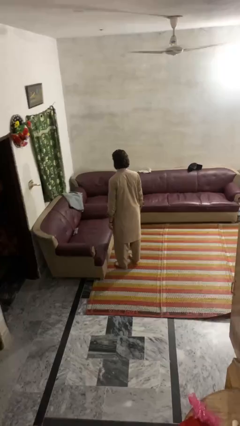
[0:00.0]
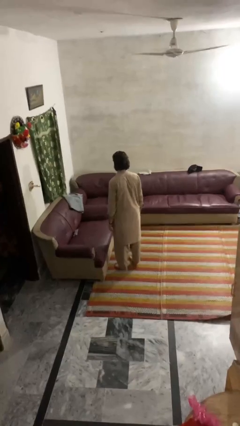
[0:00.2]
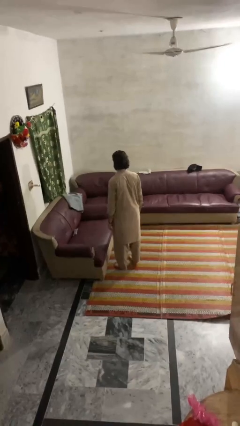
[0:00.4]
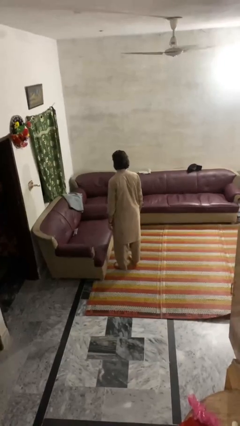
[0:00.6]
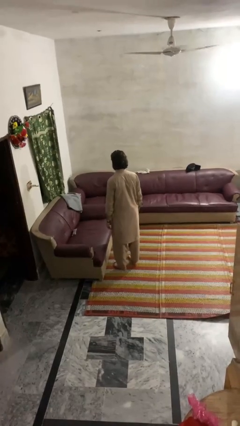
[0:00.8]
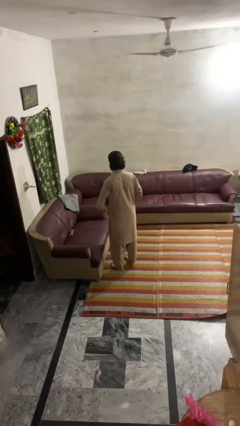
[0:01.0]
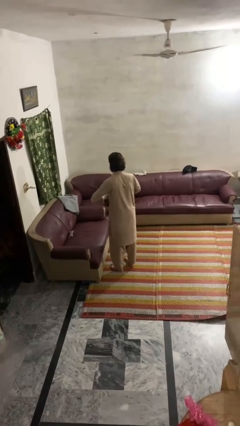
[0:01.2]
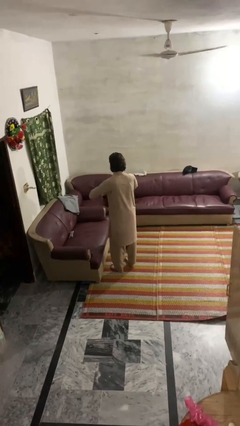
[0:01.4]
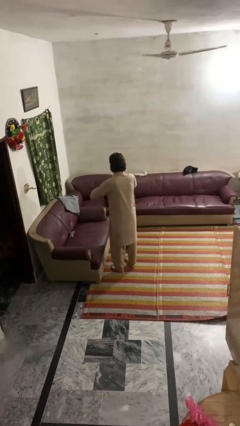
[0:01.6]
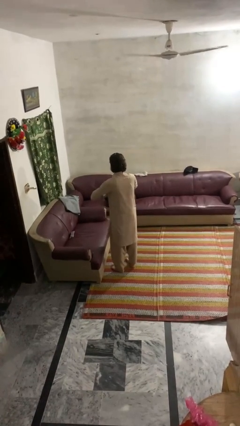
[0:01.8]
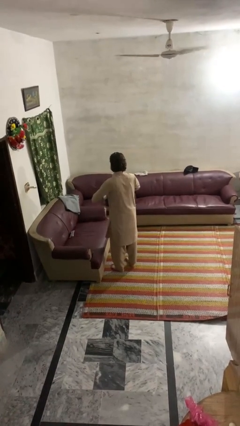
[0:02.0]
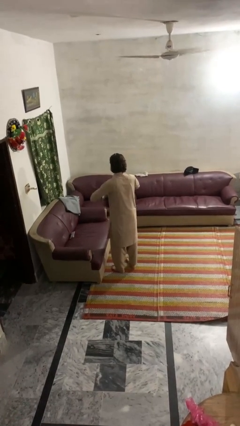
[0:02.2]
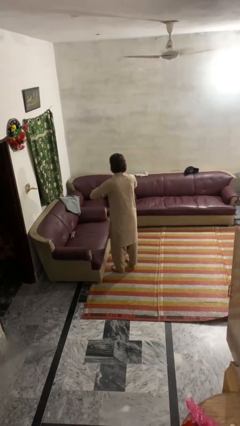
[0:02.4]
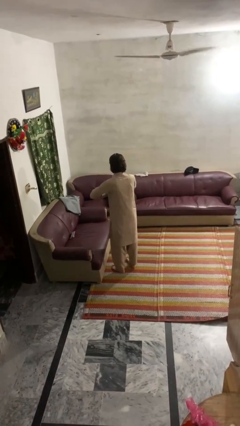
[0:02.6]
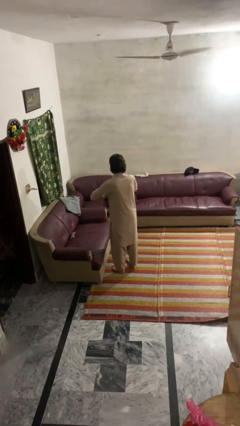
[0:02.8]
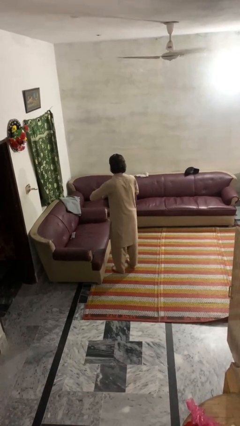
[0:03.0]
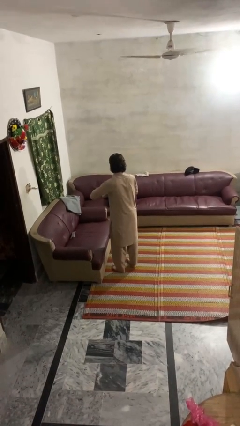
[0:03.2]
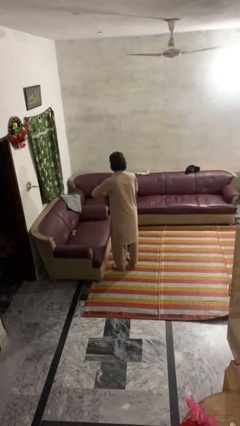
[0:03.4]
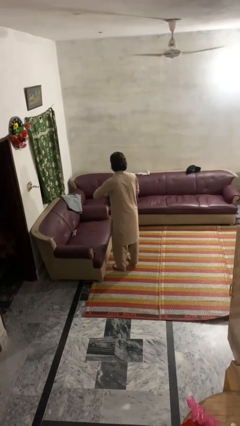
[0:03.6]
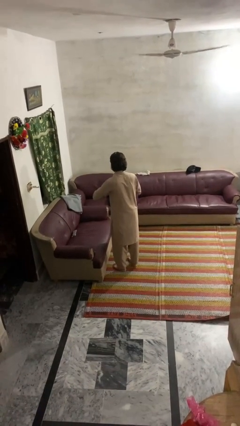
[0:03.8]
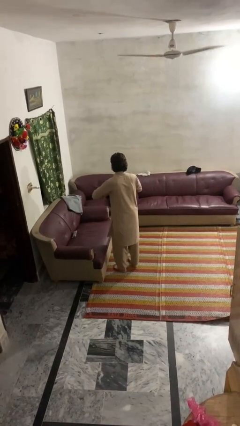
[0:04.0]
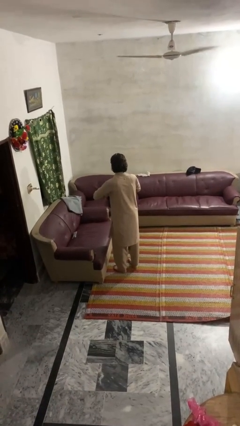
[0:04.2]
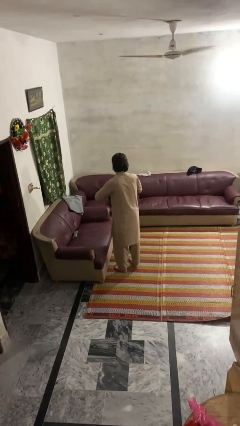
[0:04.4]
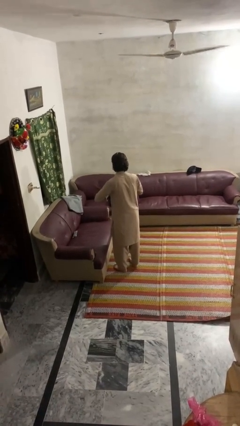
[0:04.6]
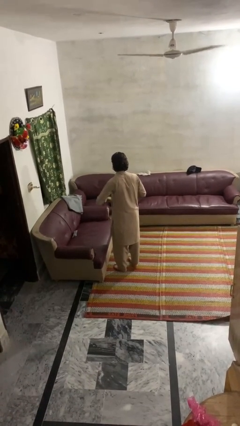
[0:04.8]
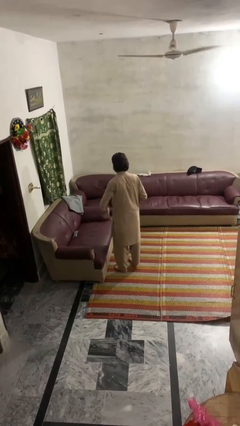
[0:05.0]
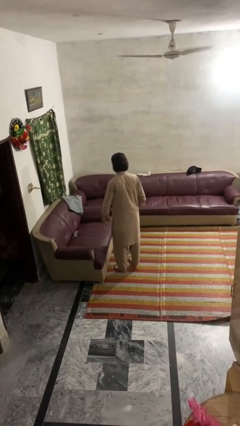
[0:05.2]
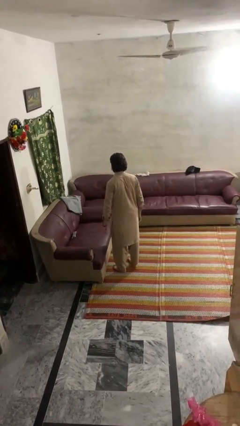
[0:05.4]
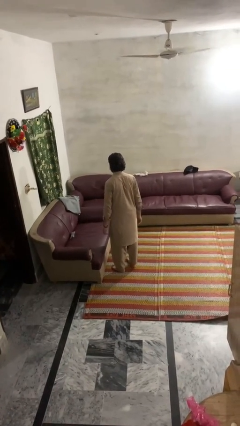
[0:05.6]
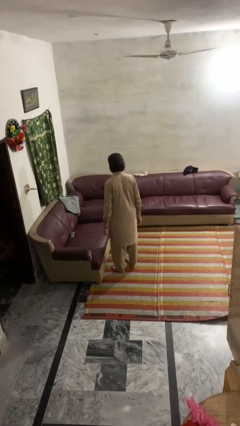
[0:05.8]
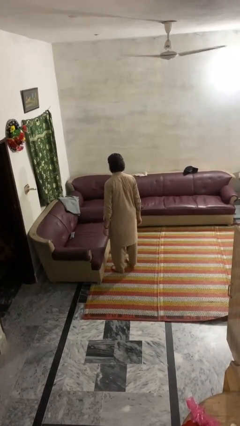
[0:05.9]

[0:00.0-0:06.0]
person cracks knuckles

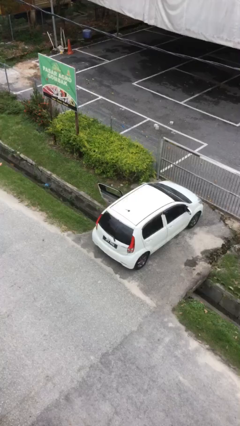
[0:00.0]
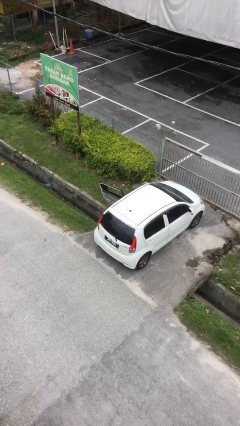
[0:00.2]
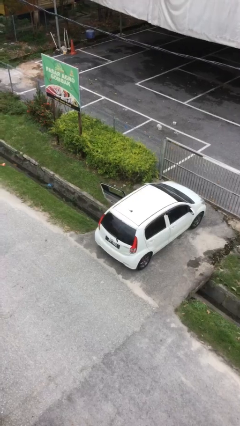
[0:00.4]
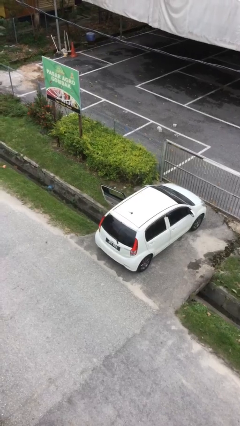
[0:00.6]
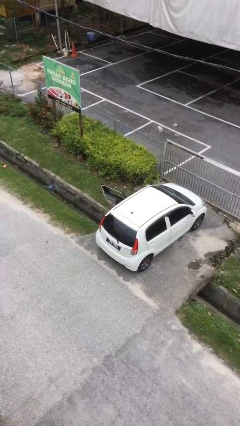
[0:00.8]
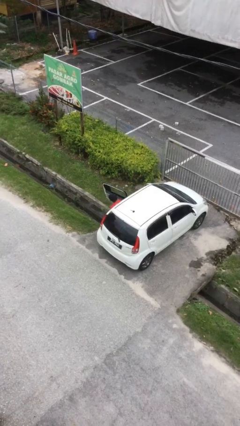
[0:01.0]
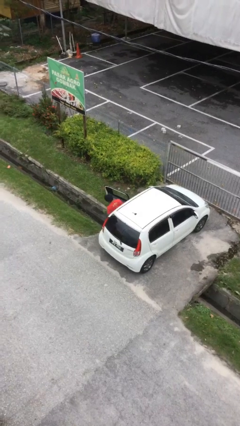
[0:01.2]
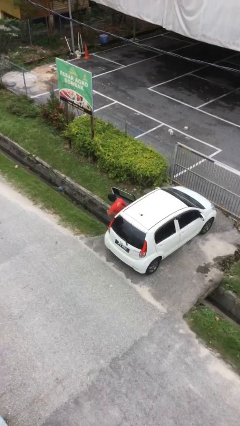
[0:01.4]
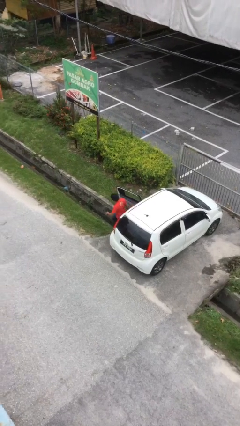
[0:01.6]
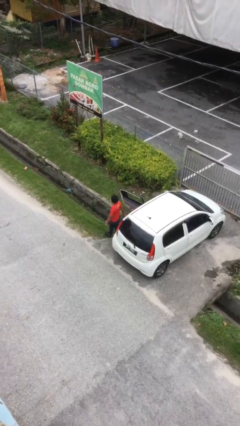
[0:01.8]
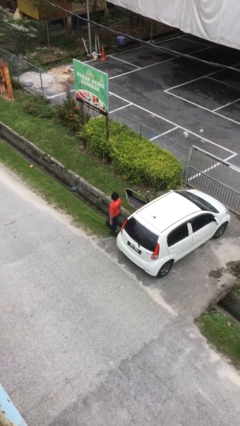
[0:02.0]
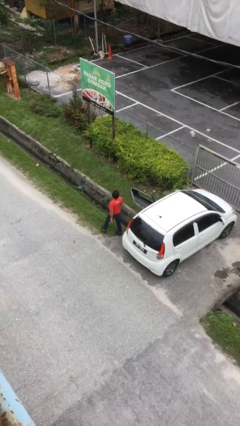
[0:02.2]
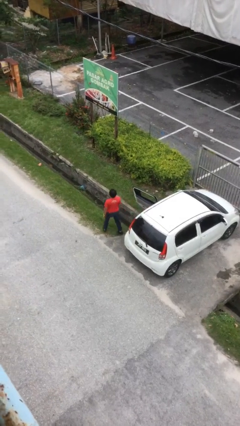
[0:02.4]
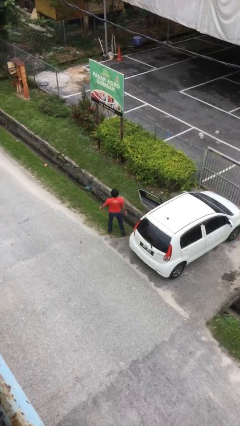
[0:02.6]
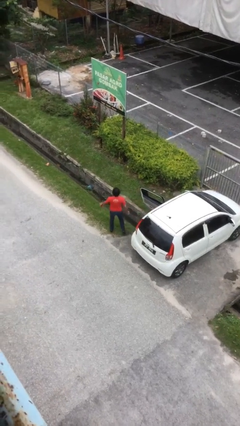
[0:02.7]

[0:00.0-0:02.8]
person exits car

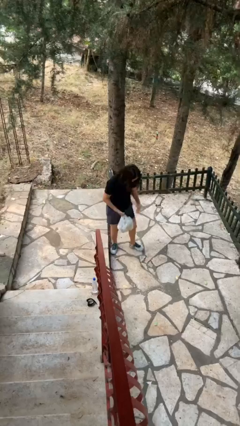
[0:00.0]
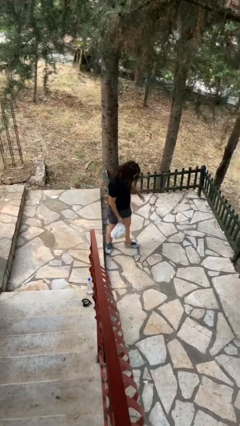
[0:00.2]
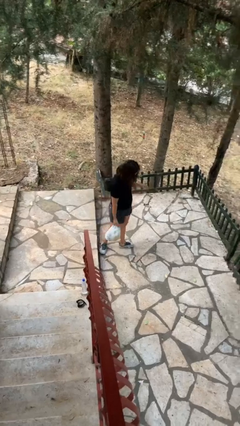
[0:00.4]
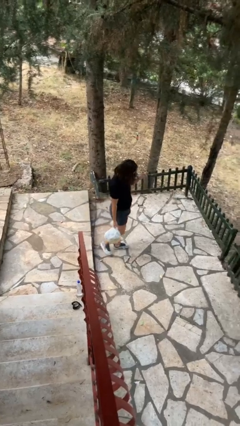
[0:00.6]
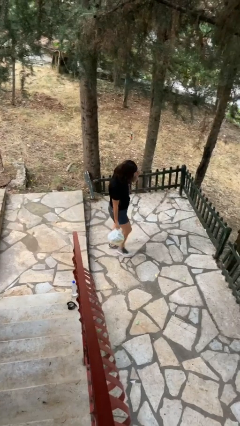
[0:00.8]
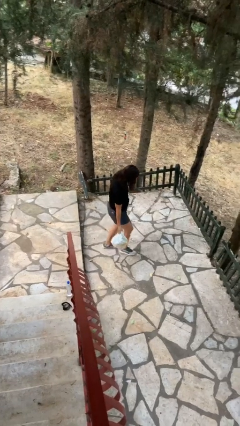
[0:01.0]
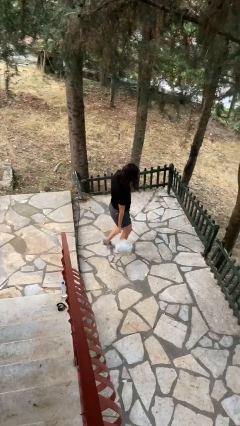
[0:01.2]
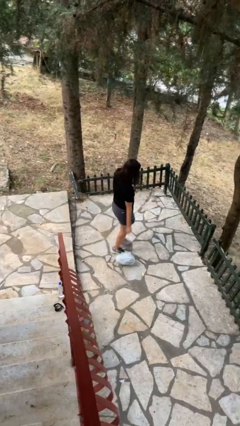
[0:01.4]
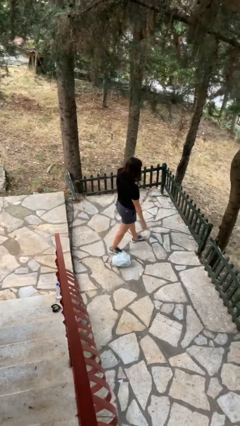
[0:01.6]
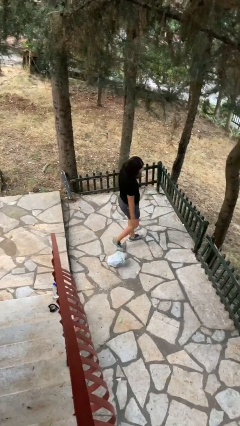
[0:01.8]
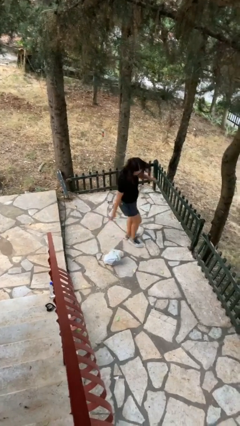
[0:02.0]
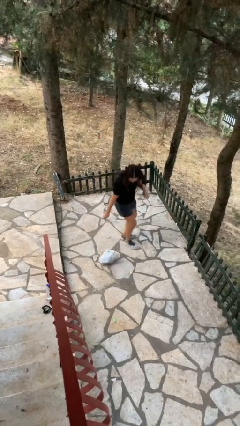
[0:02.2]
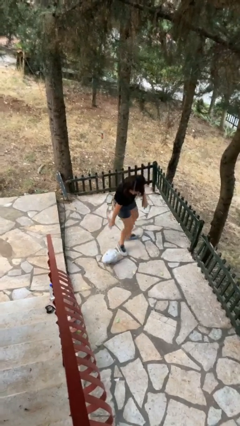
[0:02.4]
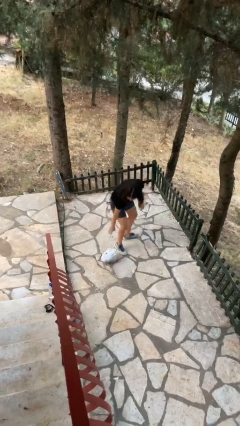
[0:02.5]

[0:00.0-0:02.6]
person drops object

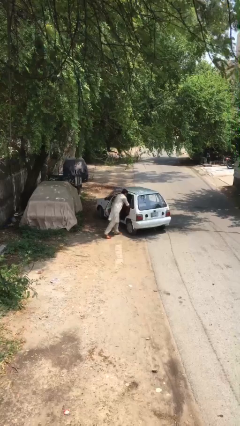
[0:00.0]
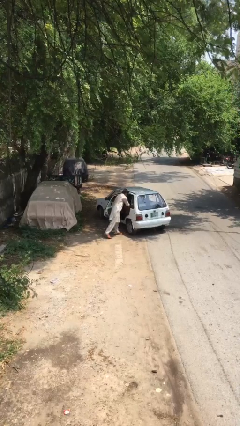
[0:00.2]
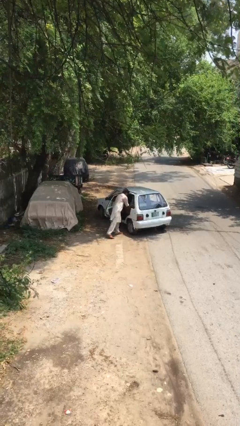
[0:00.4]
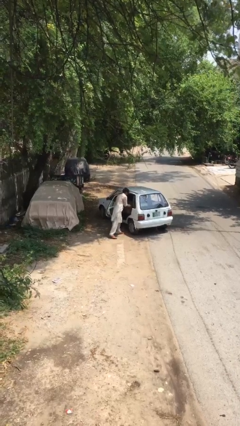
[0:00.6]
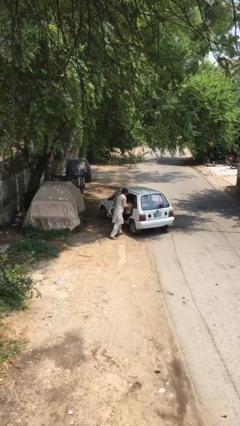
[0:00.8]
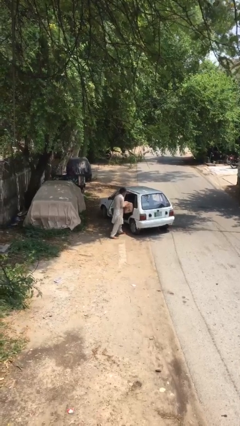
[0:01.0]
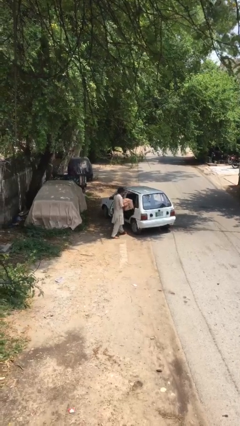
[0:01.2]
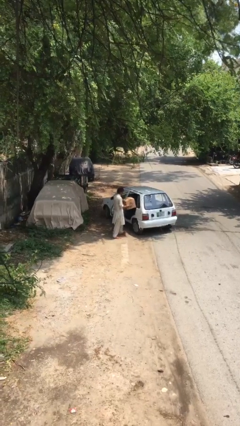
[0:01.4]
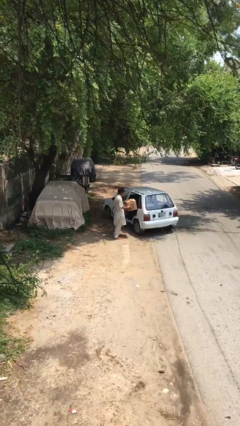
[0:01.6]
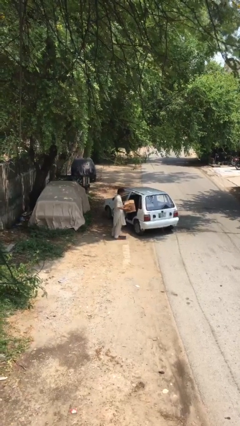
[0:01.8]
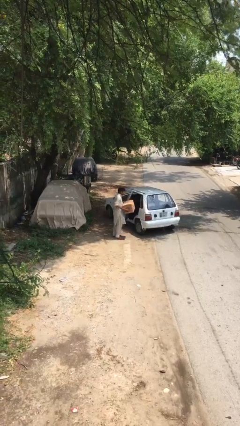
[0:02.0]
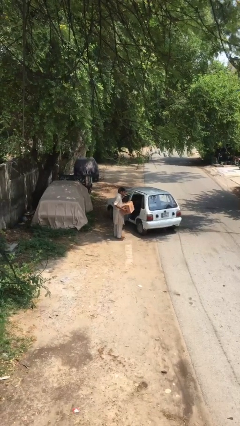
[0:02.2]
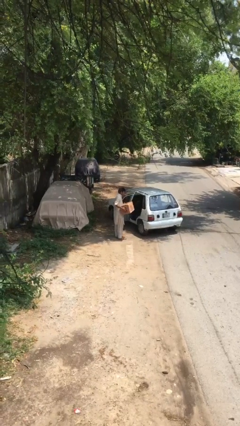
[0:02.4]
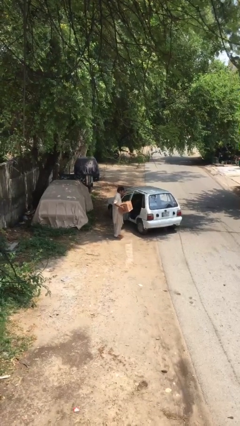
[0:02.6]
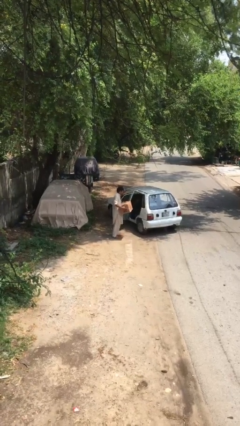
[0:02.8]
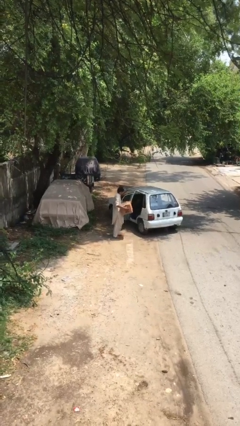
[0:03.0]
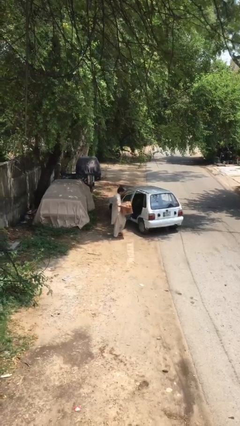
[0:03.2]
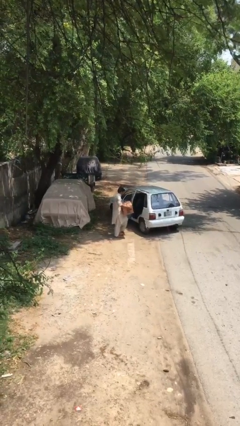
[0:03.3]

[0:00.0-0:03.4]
person unloads car

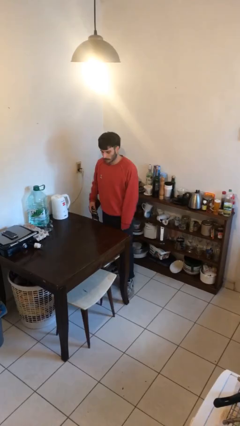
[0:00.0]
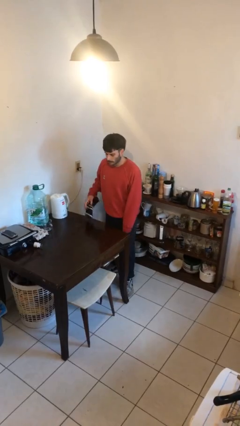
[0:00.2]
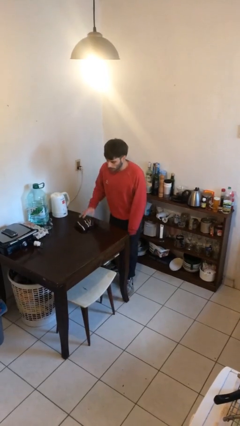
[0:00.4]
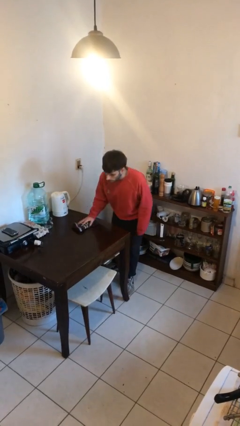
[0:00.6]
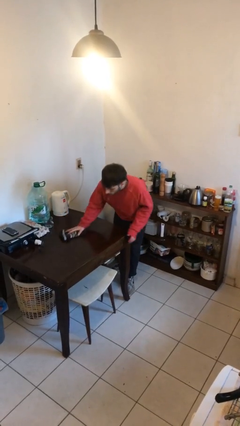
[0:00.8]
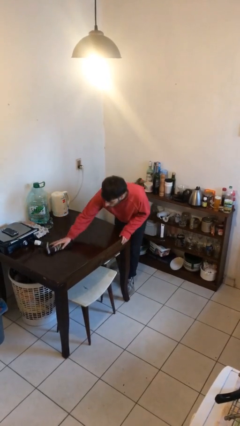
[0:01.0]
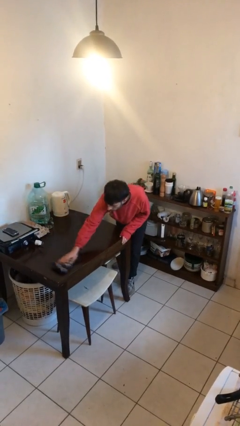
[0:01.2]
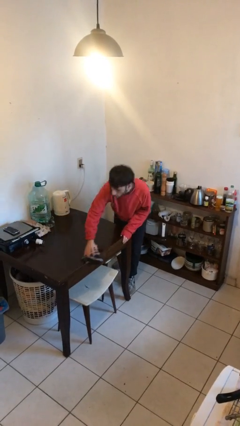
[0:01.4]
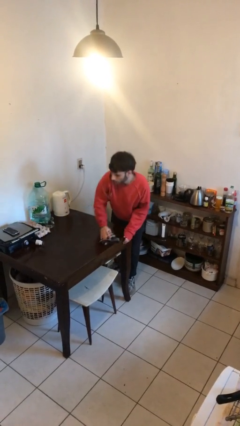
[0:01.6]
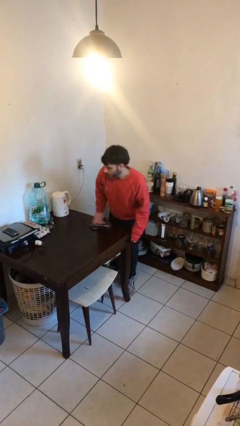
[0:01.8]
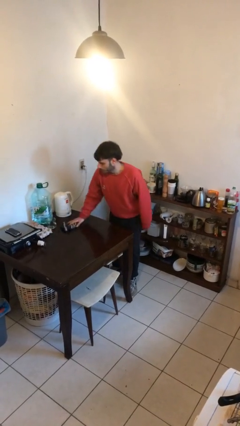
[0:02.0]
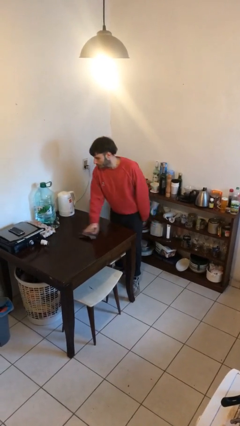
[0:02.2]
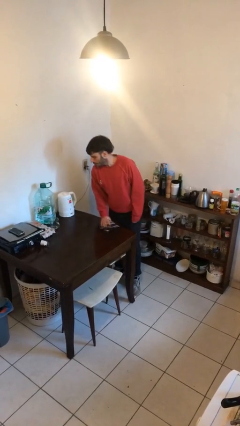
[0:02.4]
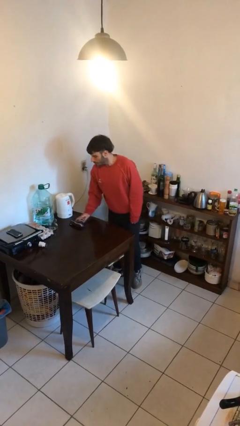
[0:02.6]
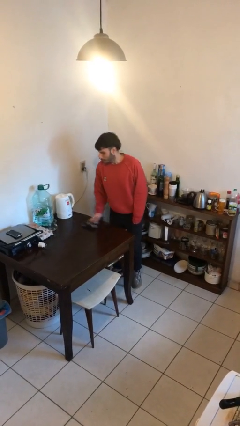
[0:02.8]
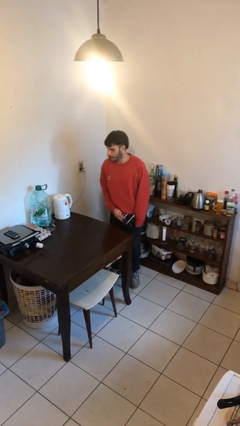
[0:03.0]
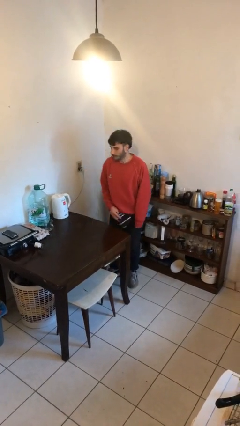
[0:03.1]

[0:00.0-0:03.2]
person cleans table with rag
